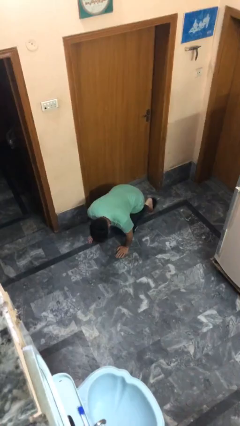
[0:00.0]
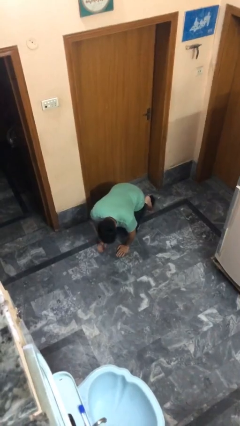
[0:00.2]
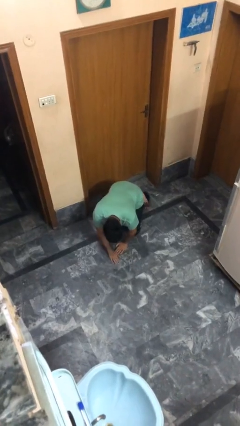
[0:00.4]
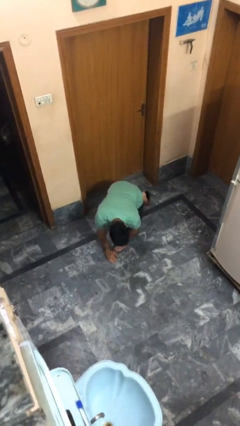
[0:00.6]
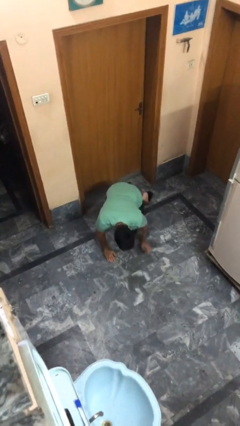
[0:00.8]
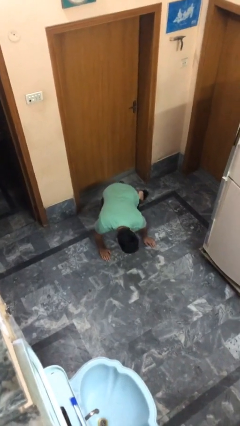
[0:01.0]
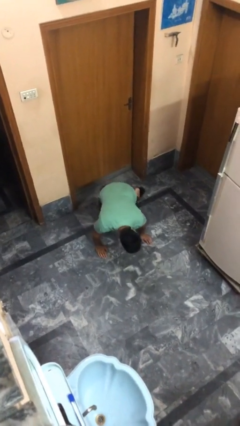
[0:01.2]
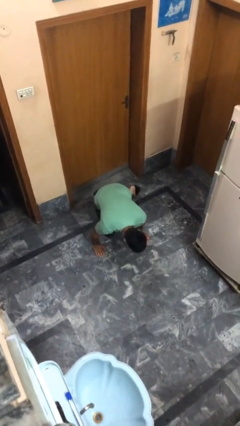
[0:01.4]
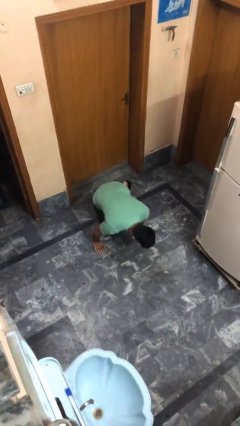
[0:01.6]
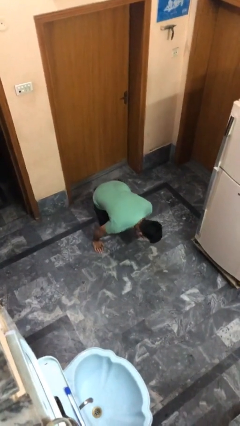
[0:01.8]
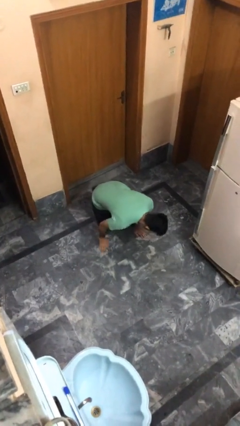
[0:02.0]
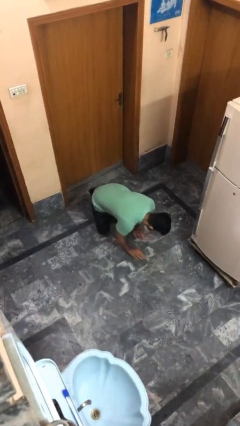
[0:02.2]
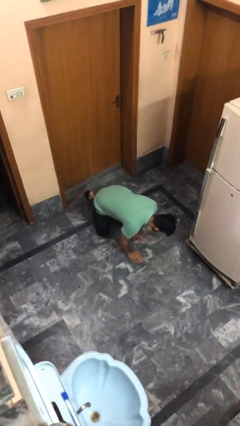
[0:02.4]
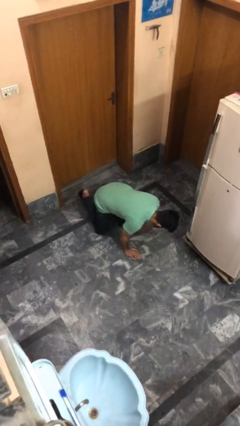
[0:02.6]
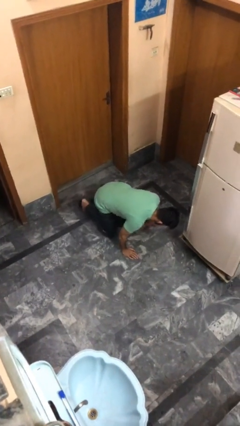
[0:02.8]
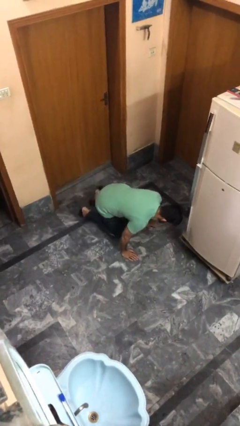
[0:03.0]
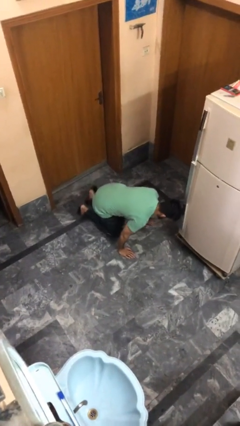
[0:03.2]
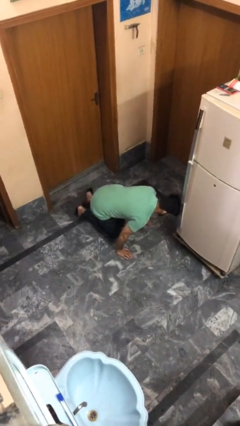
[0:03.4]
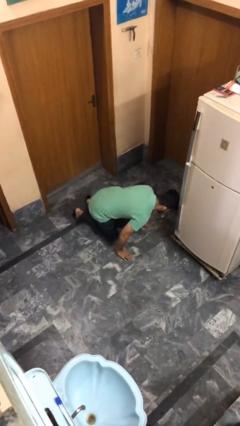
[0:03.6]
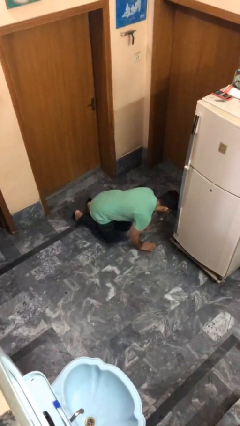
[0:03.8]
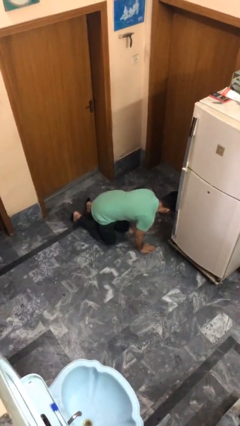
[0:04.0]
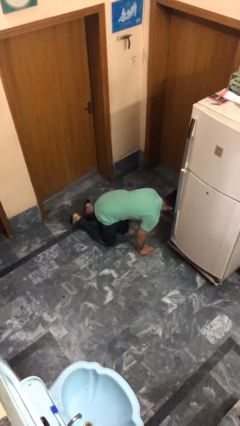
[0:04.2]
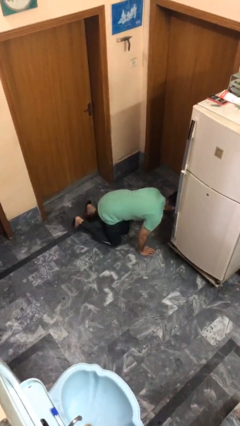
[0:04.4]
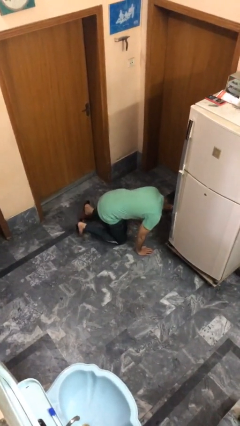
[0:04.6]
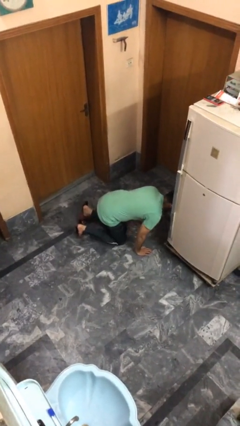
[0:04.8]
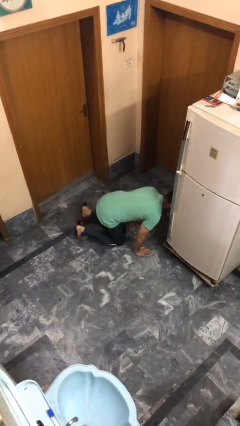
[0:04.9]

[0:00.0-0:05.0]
person crawls

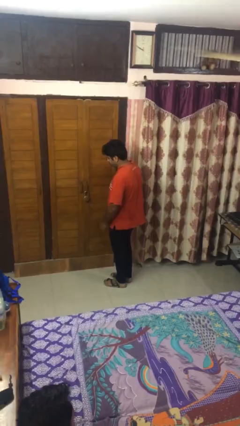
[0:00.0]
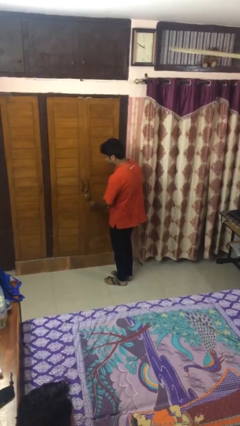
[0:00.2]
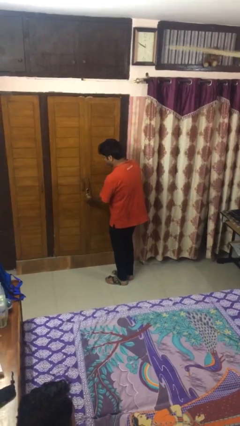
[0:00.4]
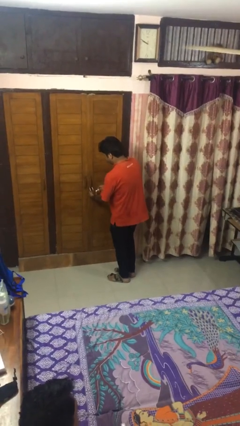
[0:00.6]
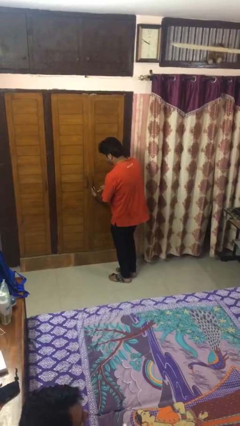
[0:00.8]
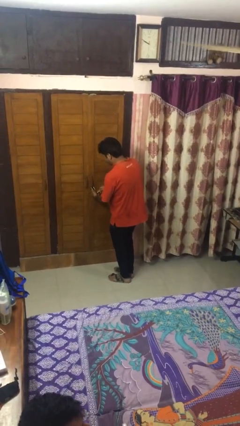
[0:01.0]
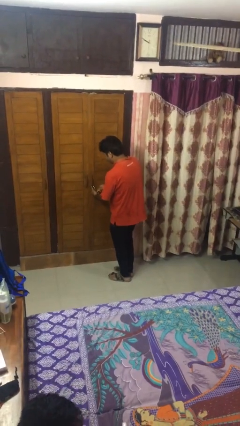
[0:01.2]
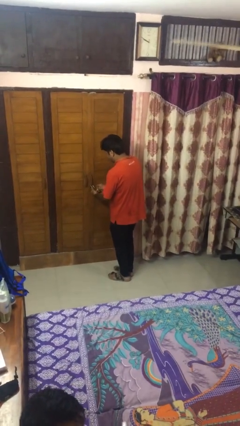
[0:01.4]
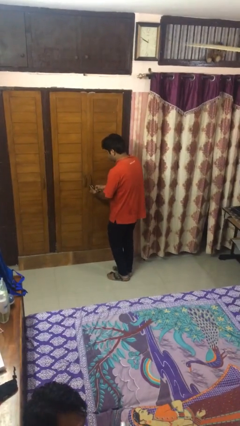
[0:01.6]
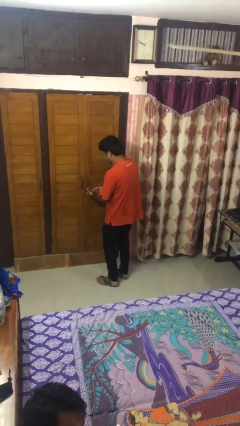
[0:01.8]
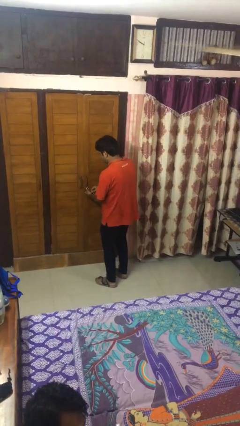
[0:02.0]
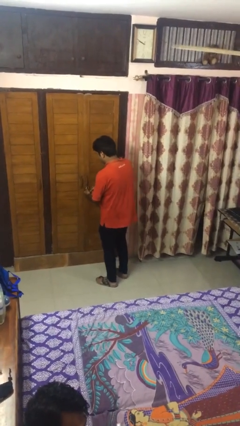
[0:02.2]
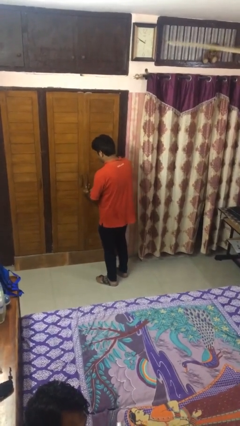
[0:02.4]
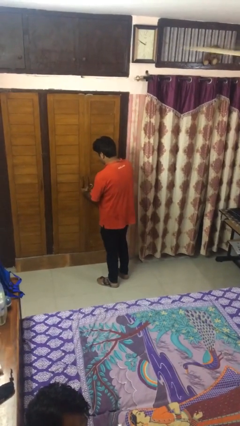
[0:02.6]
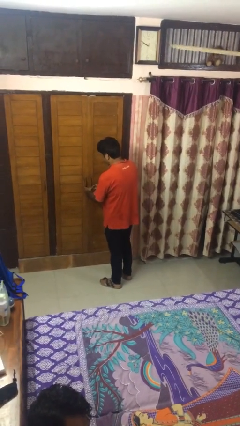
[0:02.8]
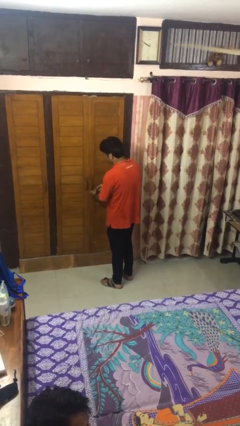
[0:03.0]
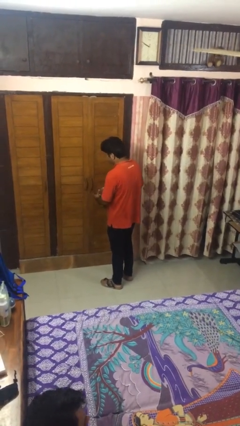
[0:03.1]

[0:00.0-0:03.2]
person unlocks door with keys

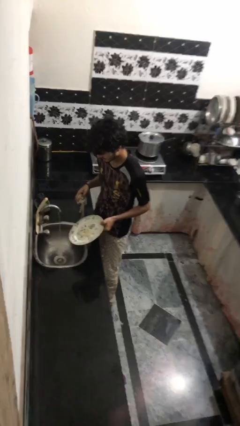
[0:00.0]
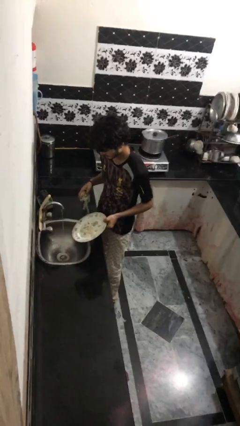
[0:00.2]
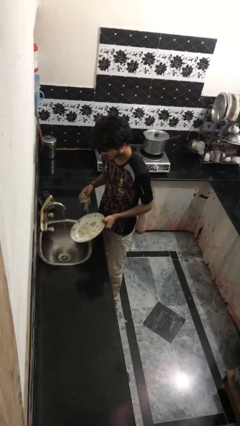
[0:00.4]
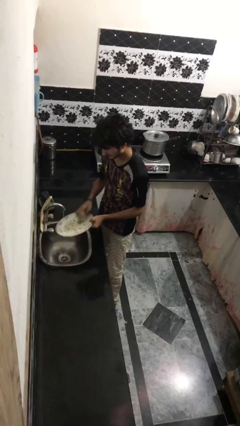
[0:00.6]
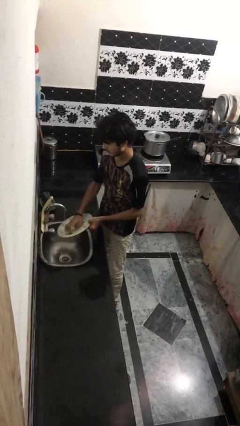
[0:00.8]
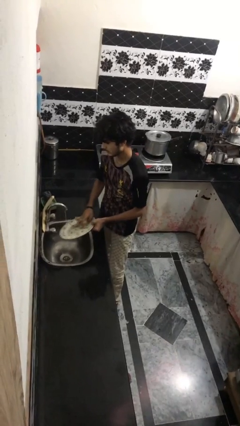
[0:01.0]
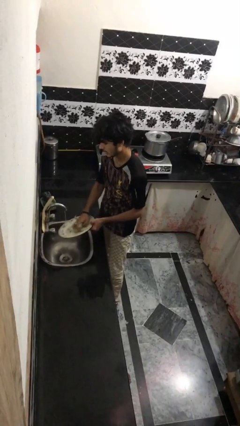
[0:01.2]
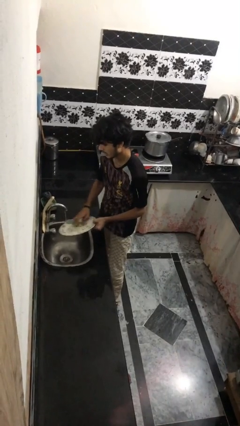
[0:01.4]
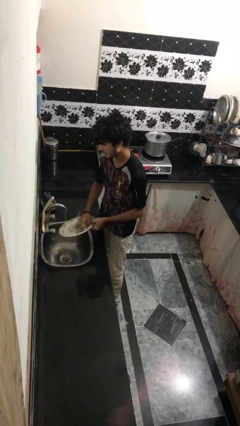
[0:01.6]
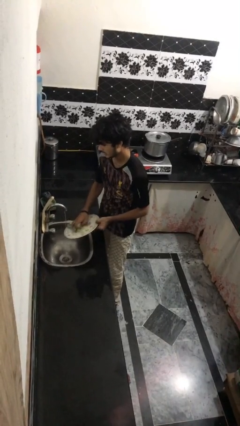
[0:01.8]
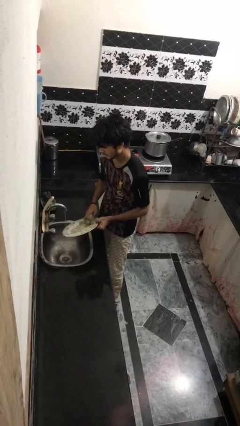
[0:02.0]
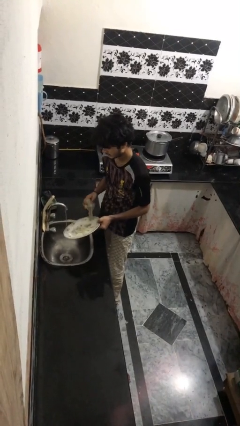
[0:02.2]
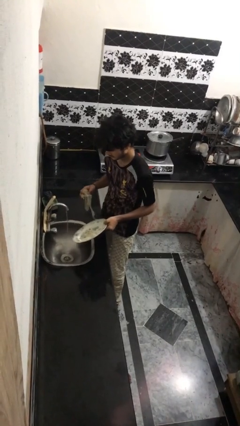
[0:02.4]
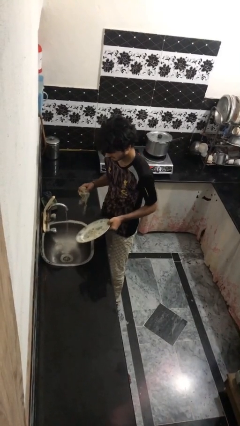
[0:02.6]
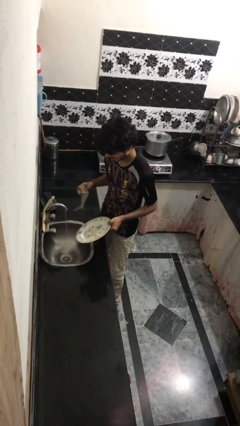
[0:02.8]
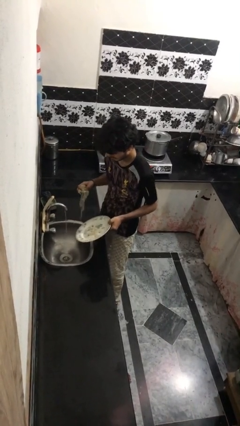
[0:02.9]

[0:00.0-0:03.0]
person washes dish

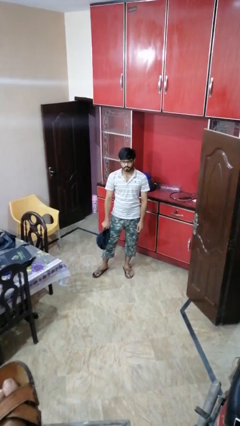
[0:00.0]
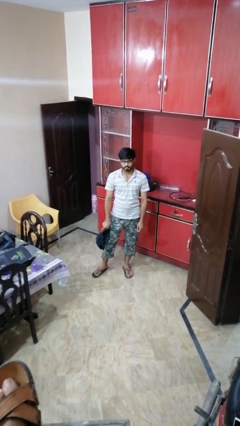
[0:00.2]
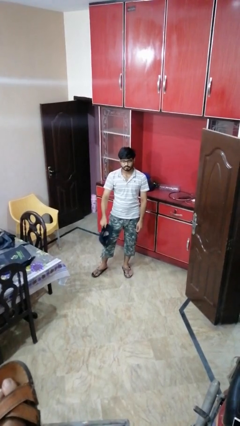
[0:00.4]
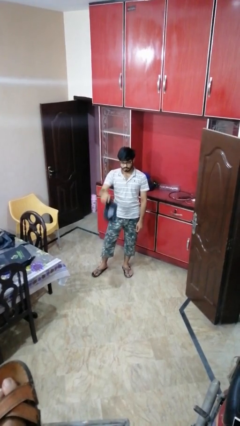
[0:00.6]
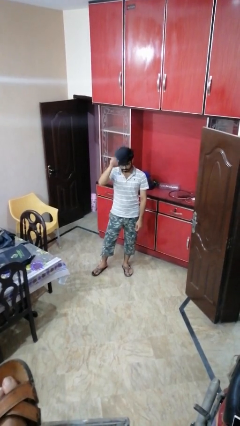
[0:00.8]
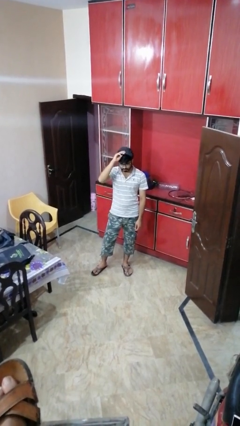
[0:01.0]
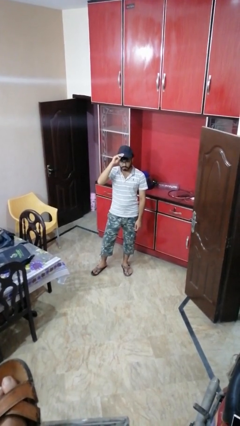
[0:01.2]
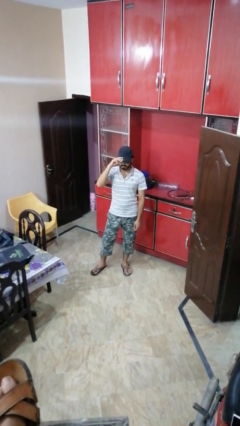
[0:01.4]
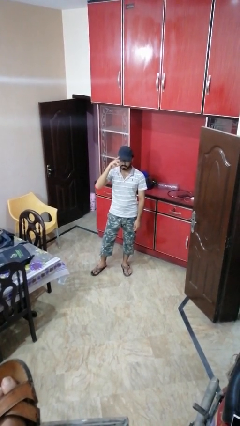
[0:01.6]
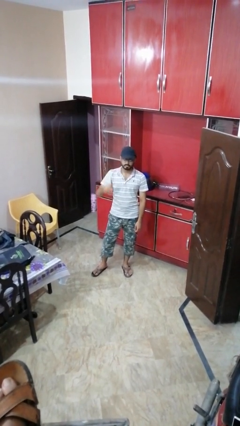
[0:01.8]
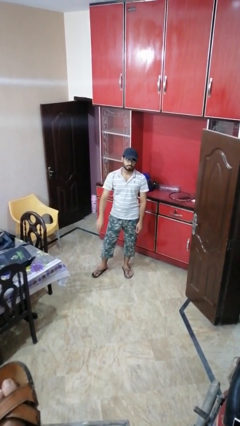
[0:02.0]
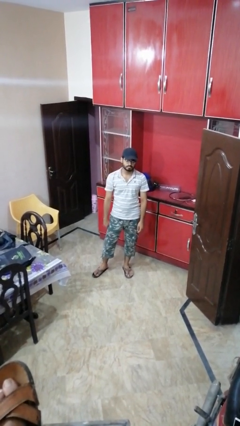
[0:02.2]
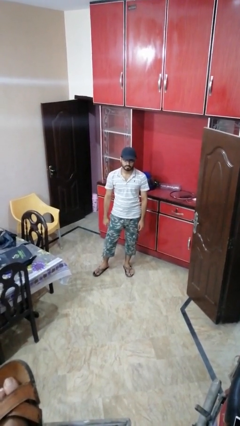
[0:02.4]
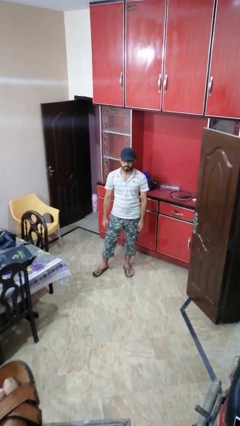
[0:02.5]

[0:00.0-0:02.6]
person puts on hat

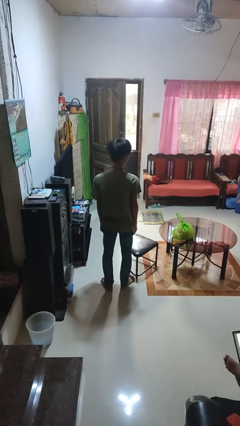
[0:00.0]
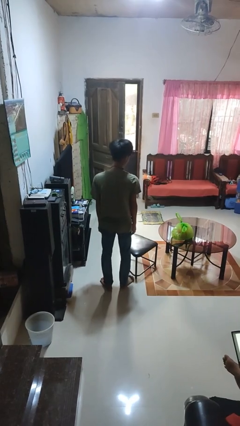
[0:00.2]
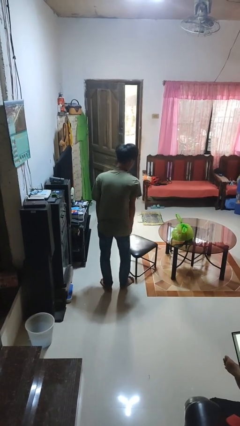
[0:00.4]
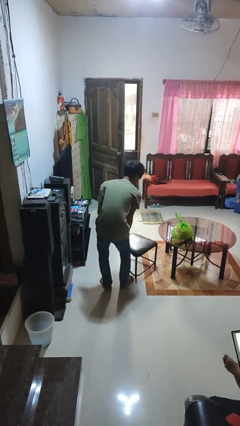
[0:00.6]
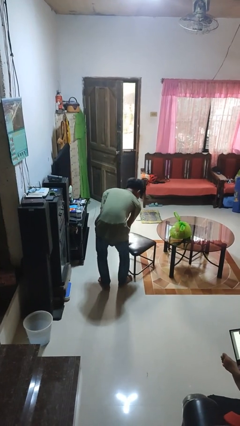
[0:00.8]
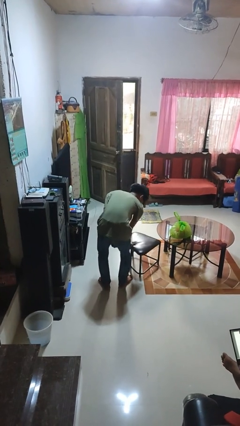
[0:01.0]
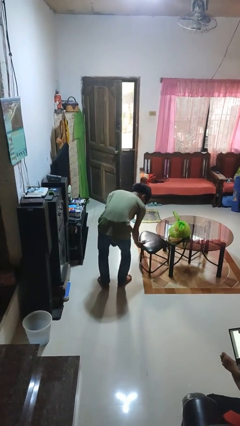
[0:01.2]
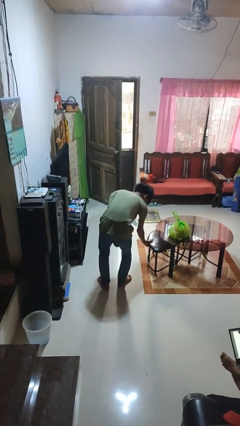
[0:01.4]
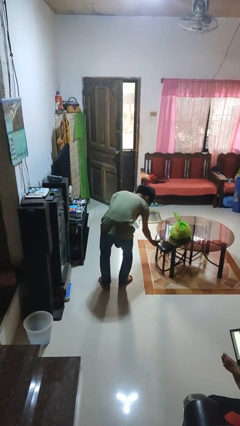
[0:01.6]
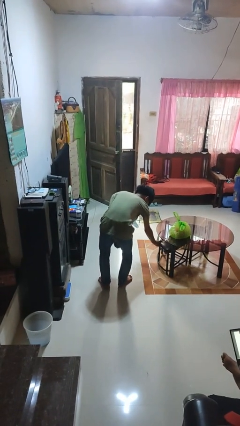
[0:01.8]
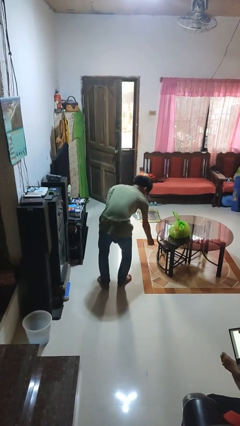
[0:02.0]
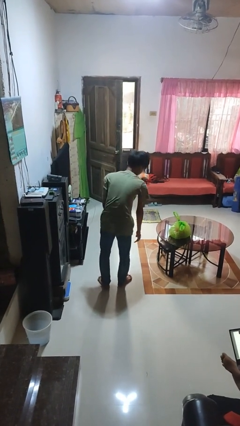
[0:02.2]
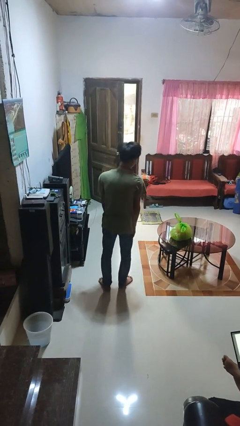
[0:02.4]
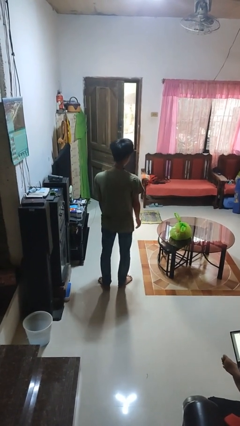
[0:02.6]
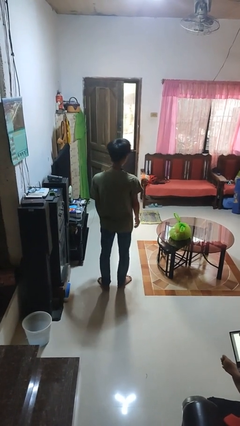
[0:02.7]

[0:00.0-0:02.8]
person pushes in chair

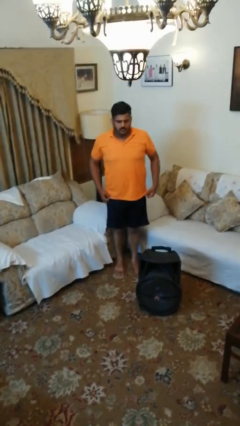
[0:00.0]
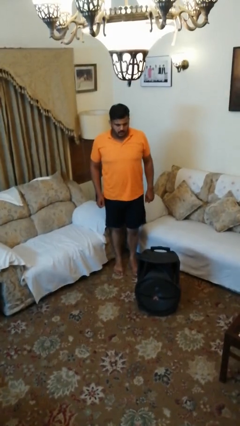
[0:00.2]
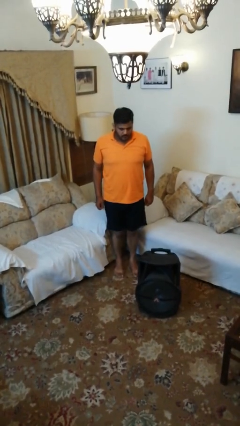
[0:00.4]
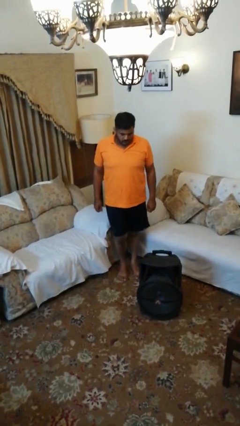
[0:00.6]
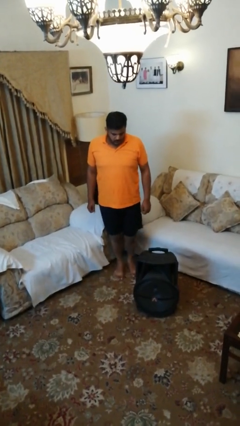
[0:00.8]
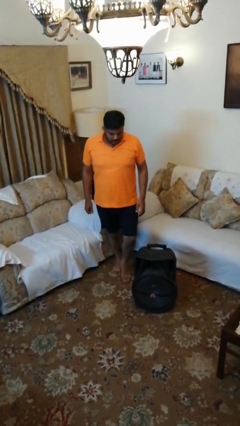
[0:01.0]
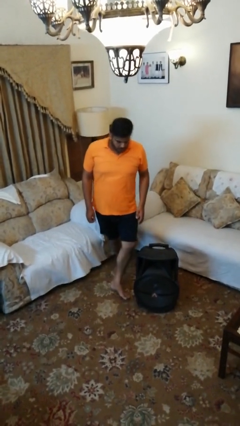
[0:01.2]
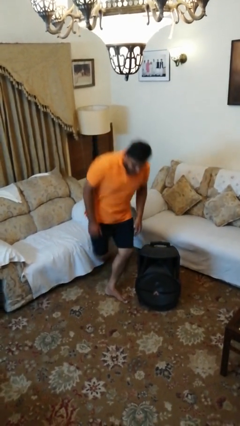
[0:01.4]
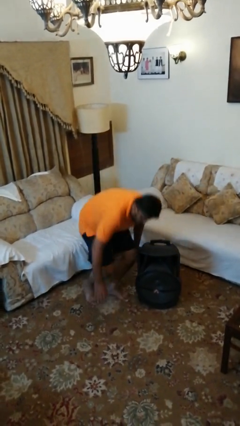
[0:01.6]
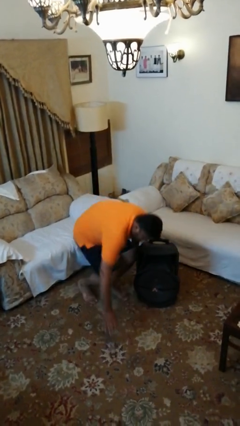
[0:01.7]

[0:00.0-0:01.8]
person trips on object on floor
